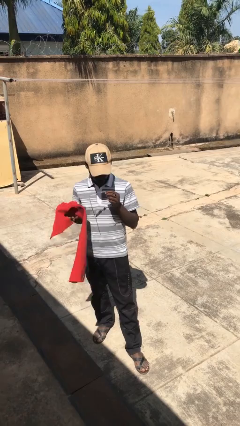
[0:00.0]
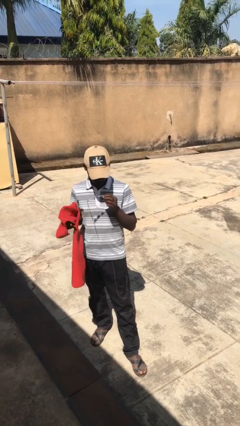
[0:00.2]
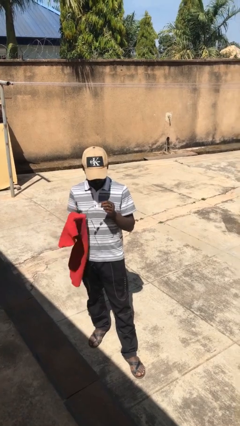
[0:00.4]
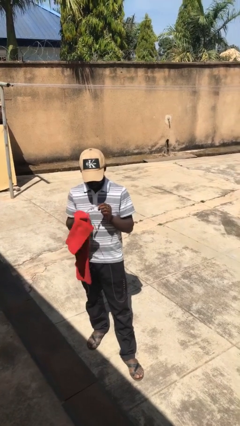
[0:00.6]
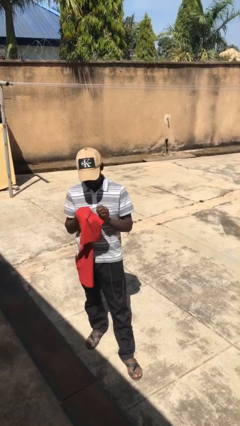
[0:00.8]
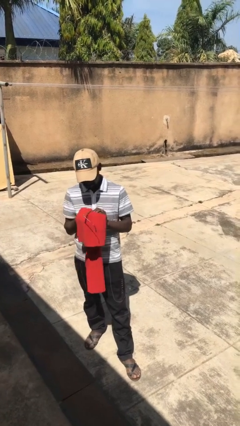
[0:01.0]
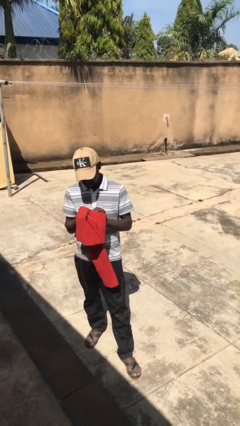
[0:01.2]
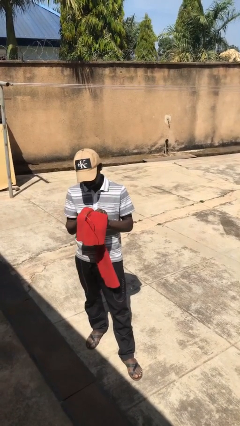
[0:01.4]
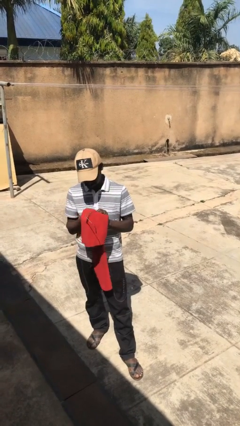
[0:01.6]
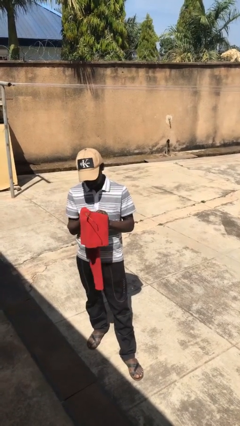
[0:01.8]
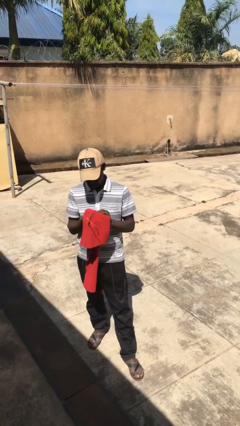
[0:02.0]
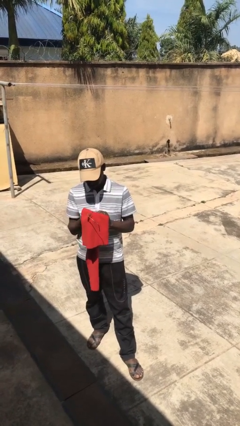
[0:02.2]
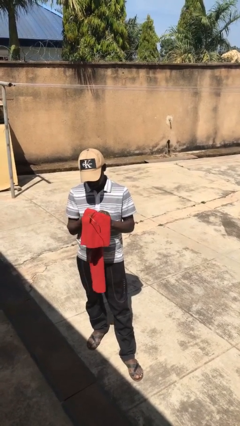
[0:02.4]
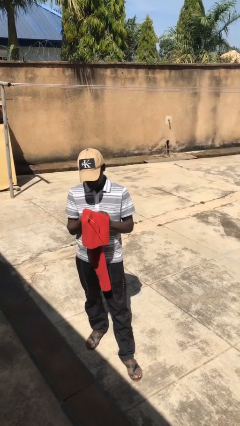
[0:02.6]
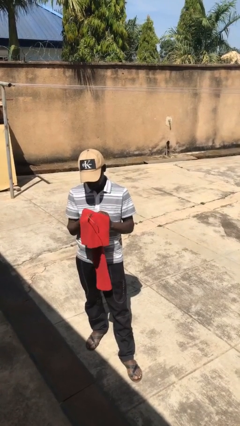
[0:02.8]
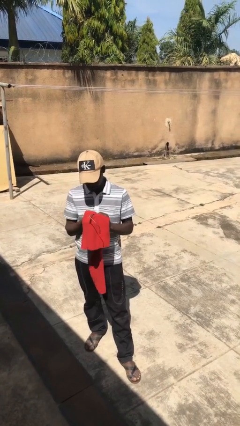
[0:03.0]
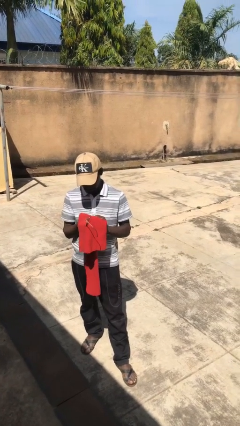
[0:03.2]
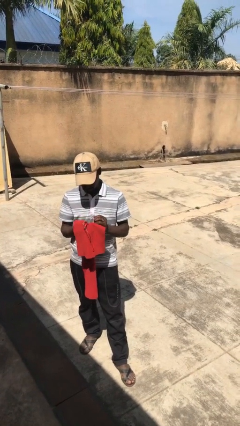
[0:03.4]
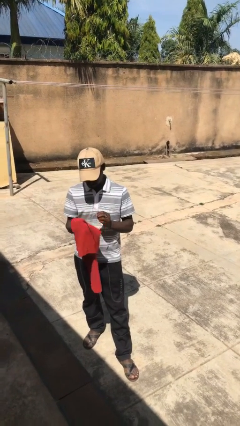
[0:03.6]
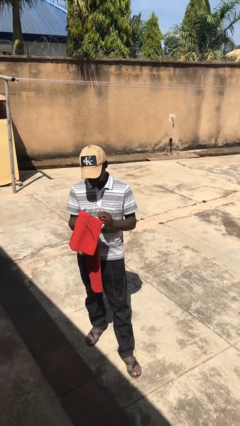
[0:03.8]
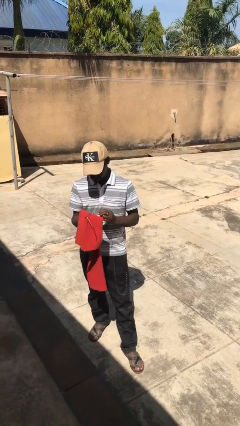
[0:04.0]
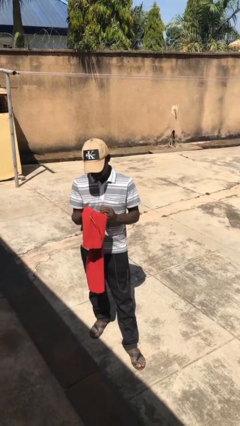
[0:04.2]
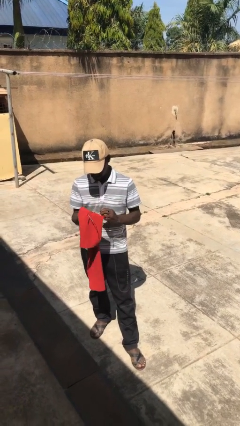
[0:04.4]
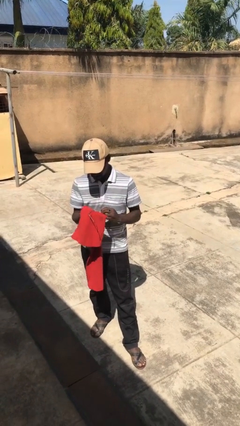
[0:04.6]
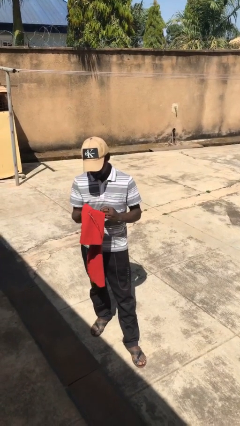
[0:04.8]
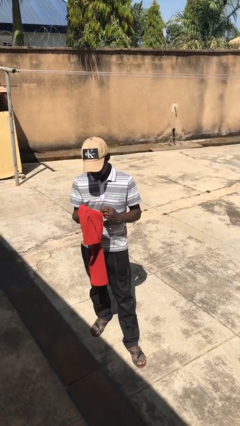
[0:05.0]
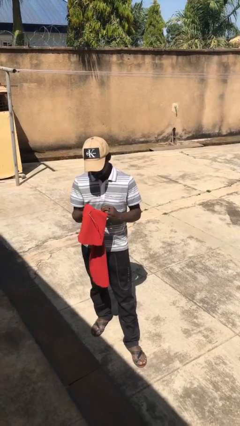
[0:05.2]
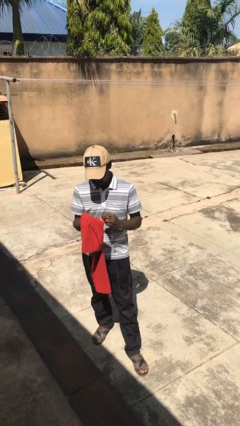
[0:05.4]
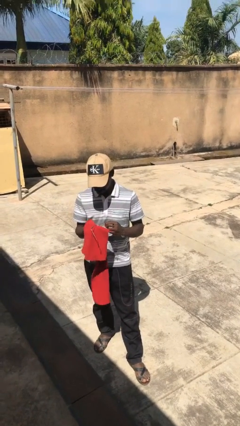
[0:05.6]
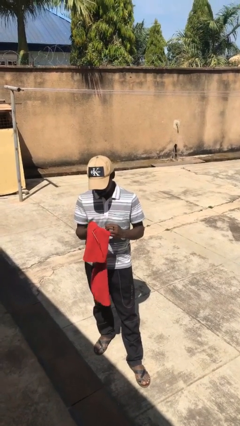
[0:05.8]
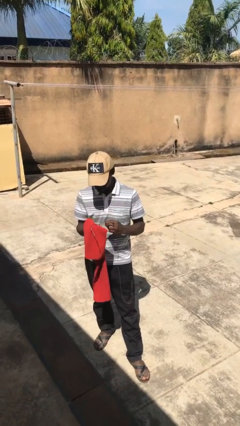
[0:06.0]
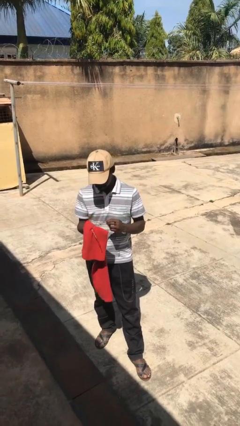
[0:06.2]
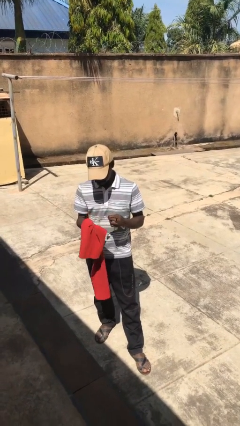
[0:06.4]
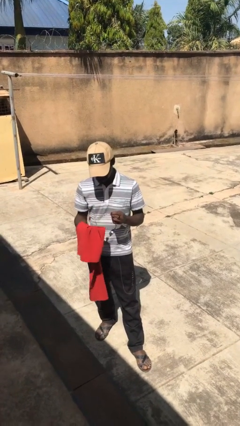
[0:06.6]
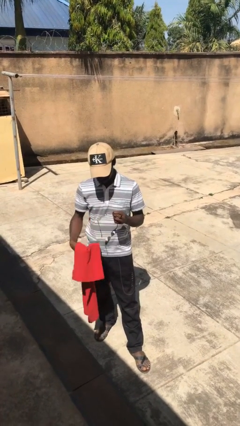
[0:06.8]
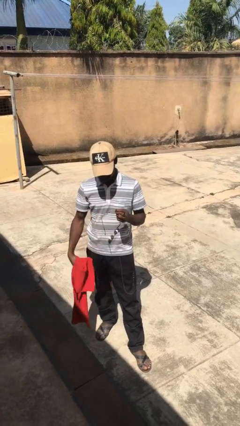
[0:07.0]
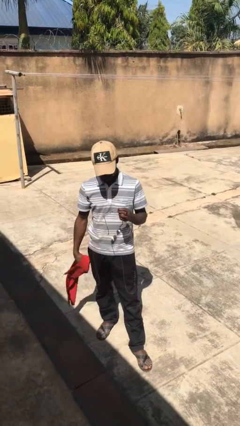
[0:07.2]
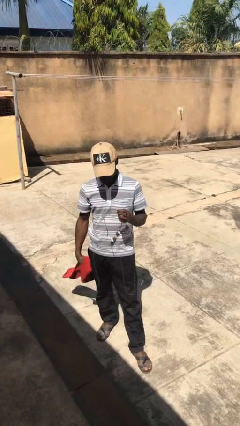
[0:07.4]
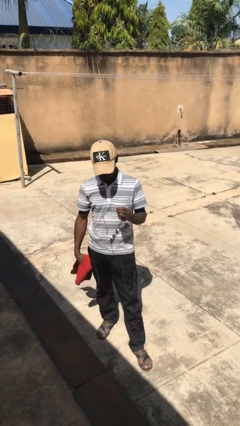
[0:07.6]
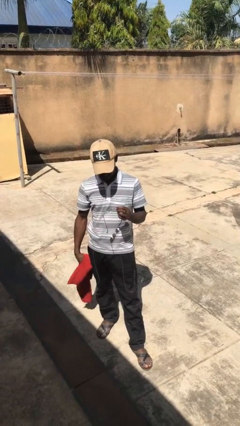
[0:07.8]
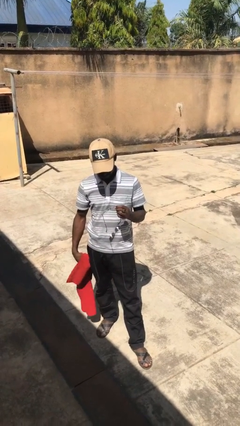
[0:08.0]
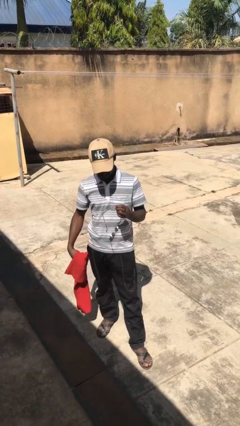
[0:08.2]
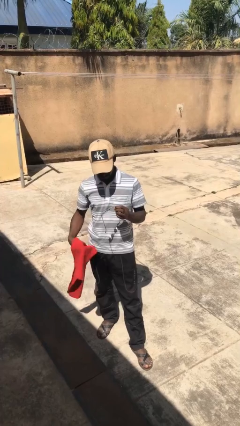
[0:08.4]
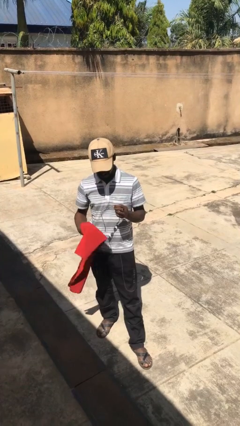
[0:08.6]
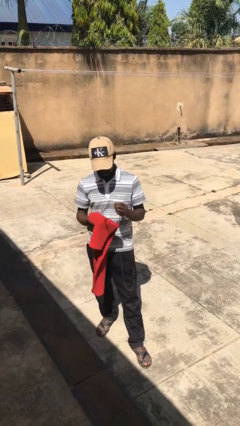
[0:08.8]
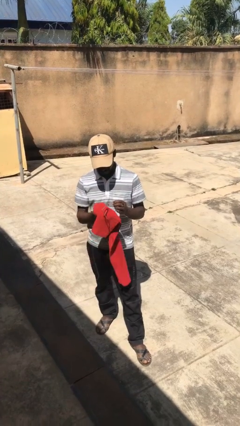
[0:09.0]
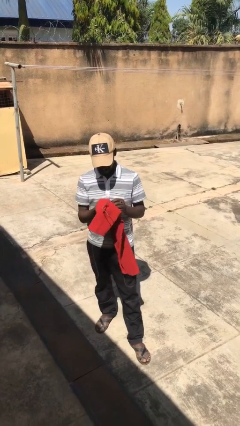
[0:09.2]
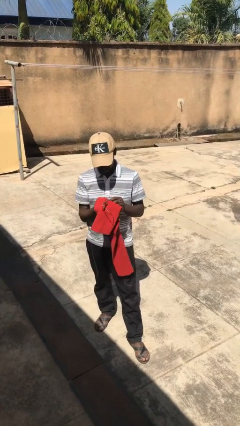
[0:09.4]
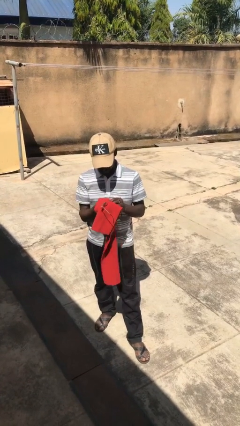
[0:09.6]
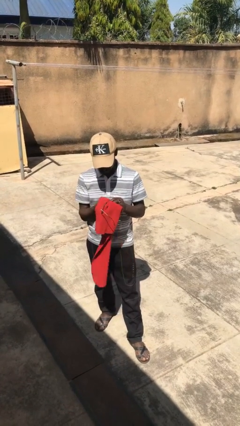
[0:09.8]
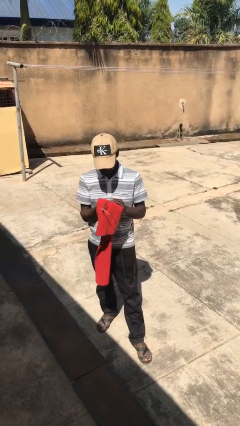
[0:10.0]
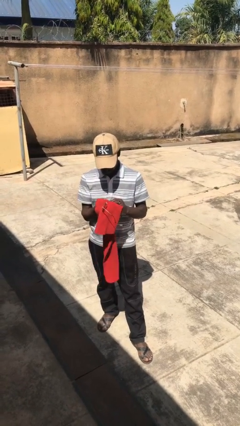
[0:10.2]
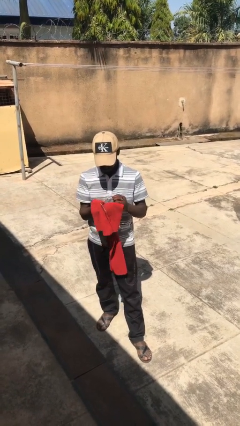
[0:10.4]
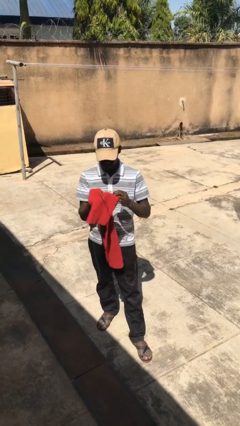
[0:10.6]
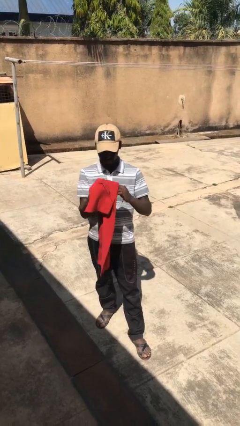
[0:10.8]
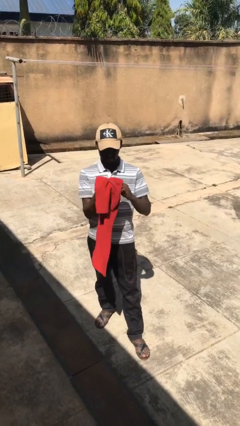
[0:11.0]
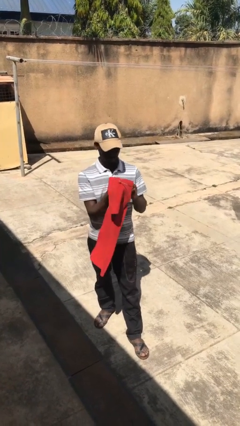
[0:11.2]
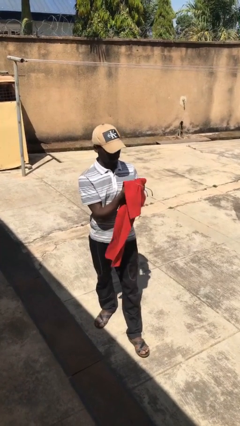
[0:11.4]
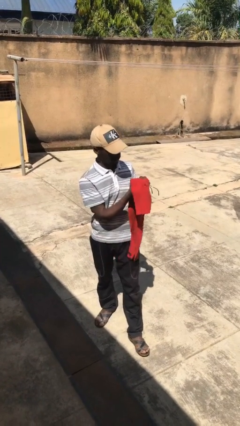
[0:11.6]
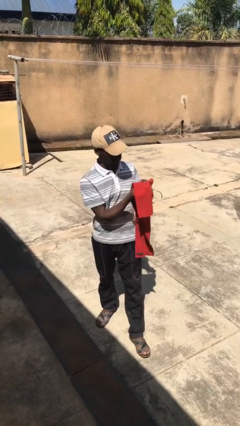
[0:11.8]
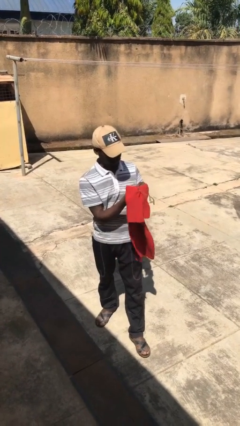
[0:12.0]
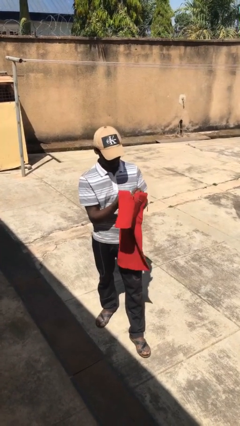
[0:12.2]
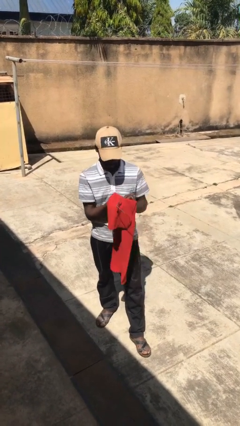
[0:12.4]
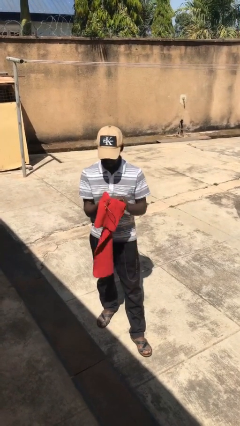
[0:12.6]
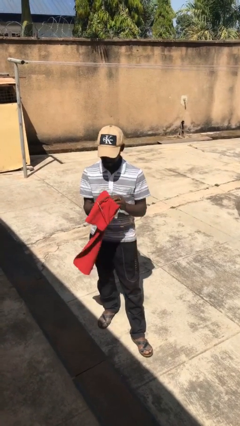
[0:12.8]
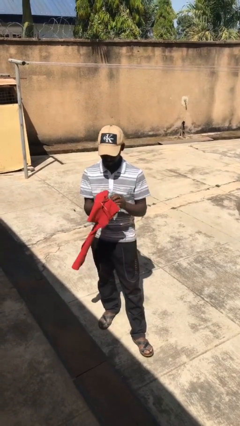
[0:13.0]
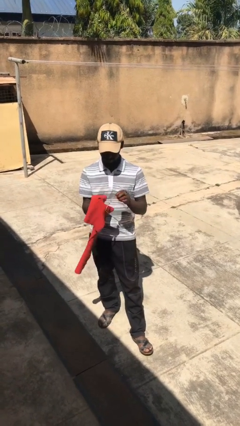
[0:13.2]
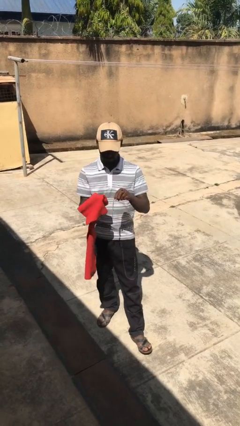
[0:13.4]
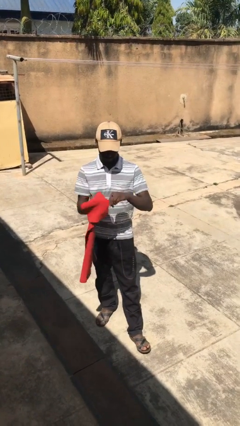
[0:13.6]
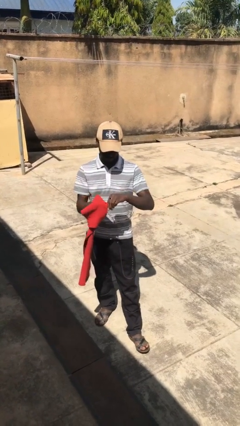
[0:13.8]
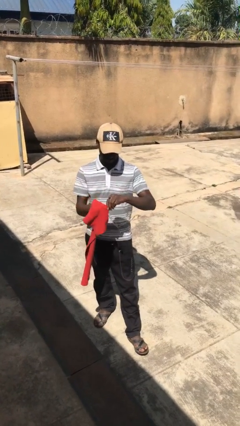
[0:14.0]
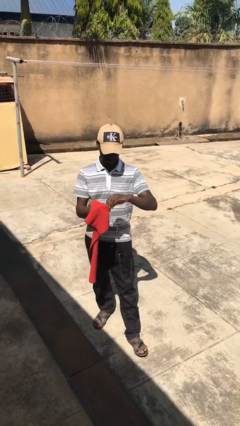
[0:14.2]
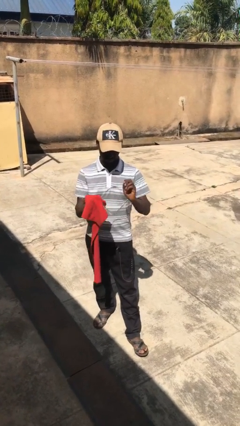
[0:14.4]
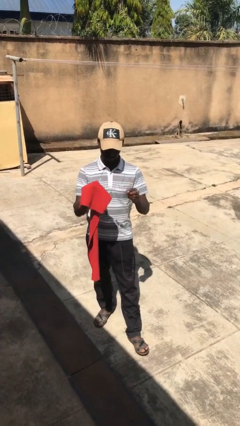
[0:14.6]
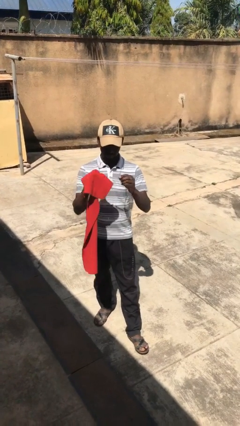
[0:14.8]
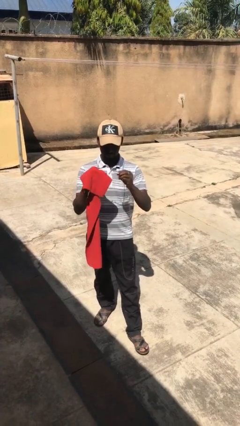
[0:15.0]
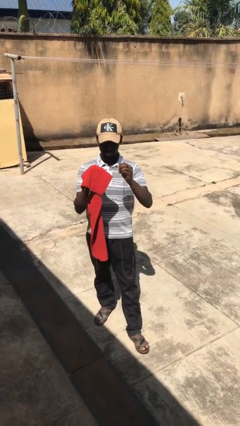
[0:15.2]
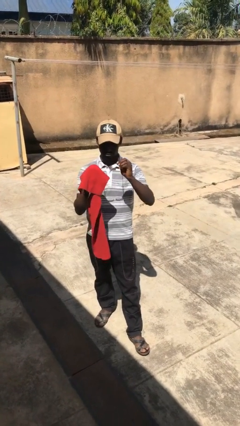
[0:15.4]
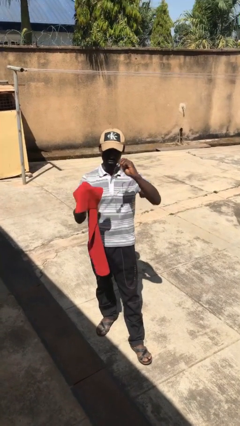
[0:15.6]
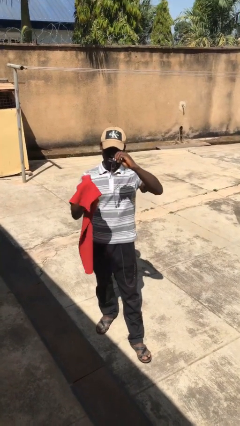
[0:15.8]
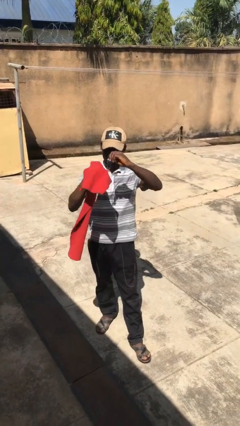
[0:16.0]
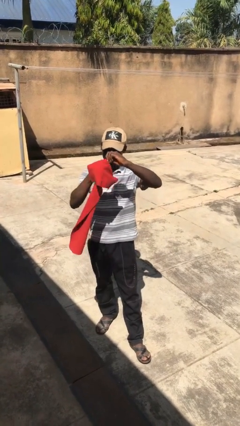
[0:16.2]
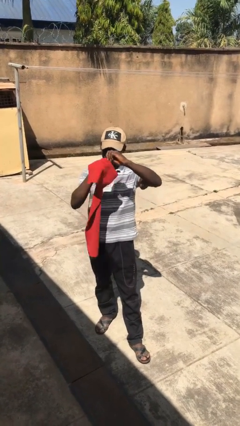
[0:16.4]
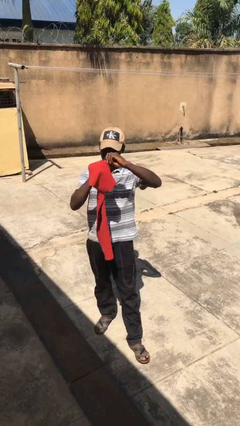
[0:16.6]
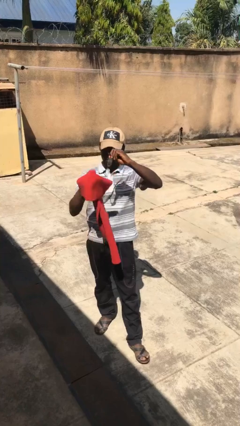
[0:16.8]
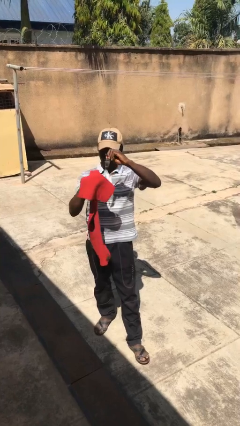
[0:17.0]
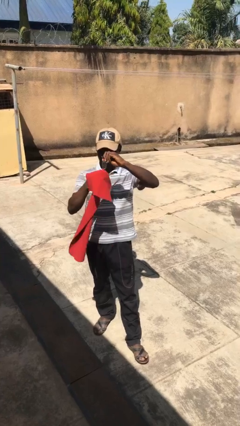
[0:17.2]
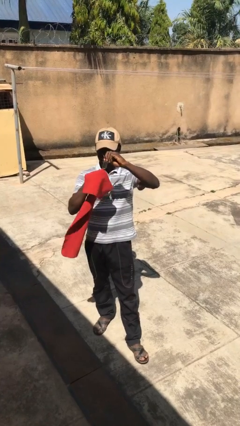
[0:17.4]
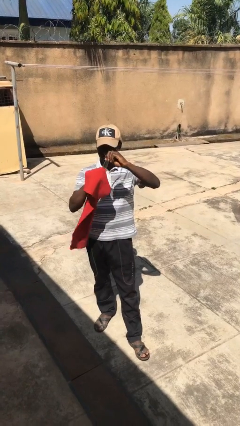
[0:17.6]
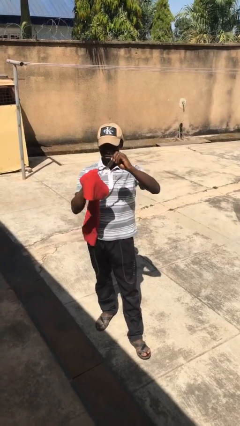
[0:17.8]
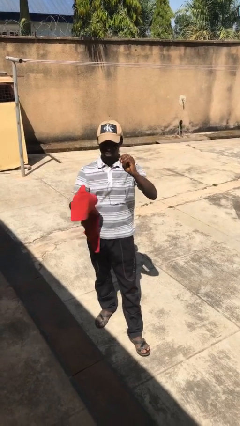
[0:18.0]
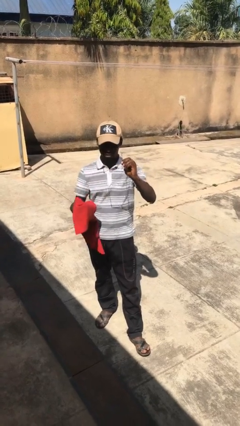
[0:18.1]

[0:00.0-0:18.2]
person cleans eyeglasses

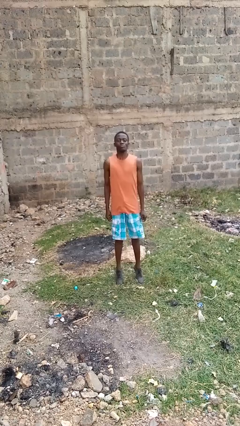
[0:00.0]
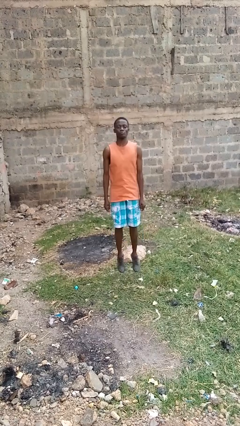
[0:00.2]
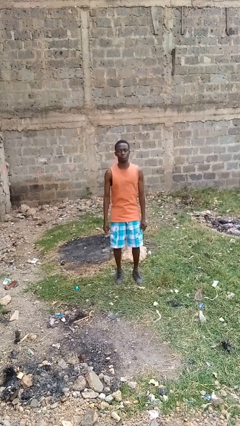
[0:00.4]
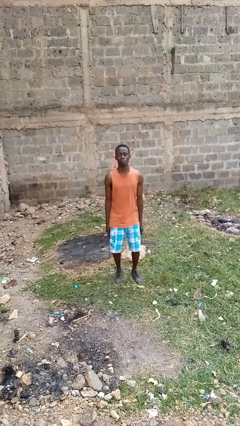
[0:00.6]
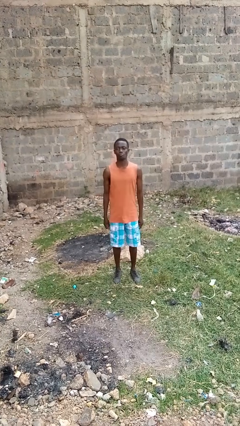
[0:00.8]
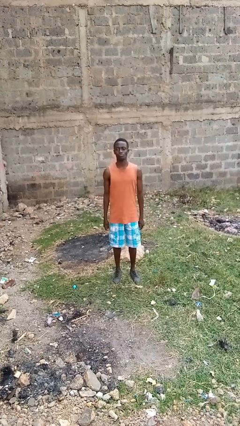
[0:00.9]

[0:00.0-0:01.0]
person jumps
